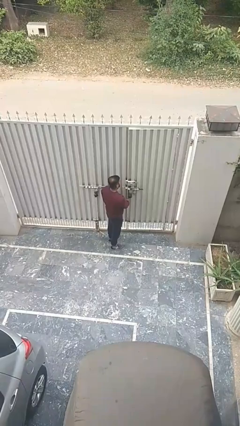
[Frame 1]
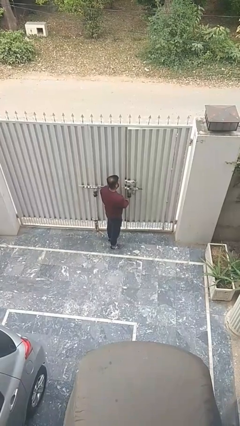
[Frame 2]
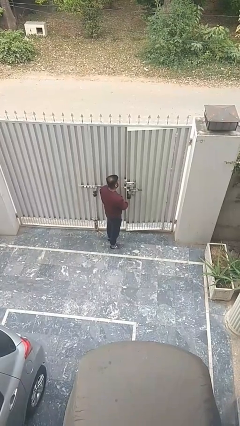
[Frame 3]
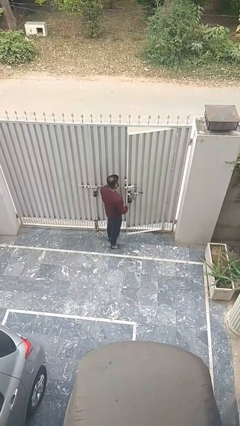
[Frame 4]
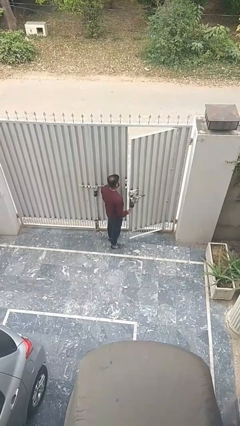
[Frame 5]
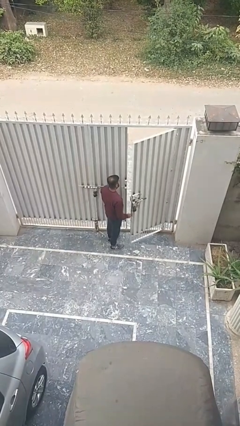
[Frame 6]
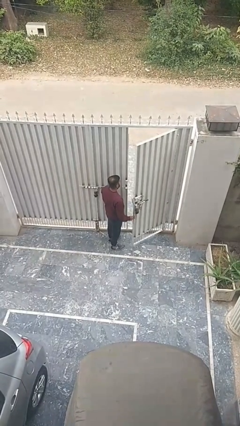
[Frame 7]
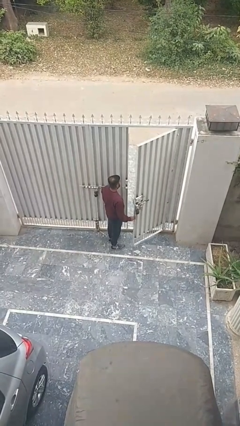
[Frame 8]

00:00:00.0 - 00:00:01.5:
person opens facility door

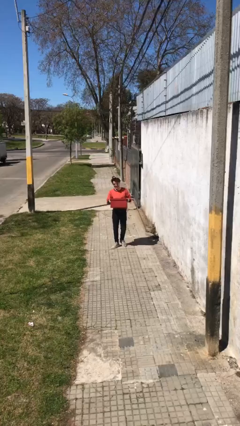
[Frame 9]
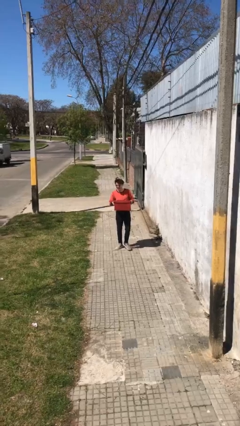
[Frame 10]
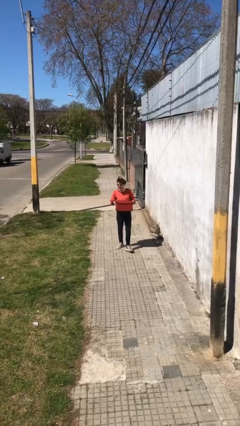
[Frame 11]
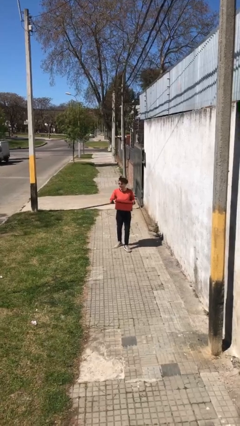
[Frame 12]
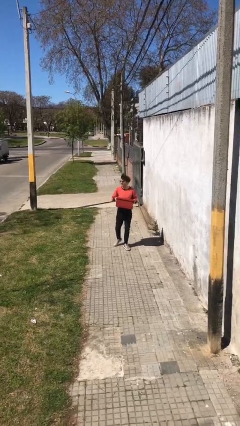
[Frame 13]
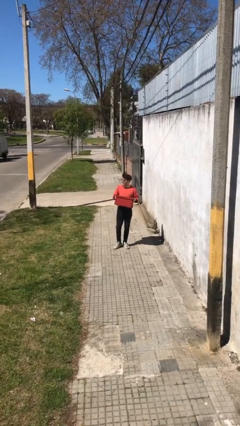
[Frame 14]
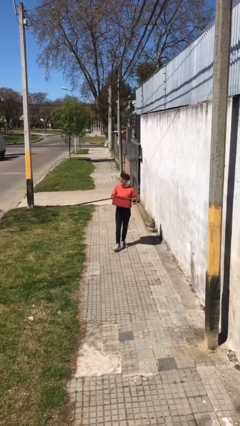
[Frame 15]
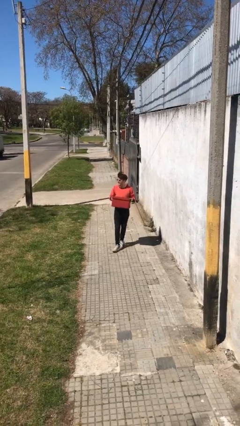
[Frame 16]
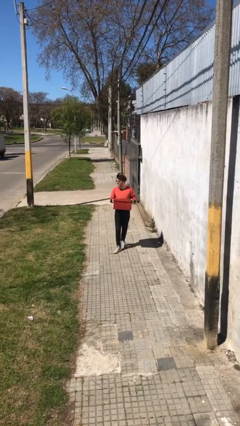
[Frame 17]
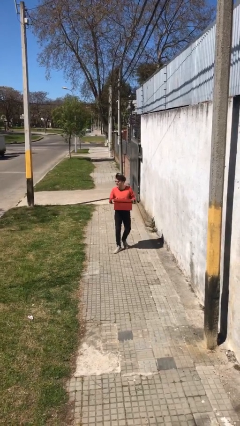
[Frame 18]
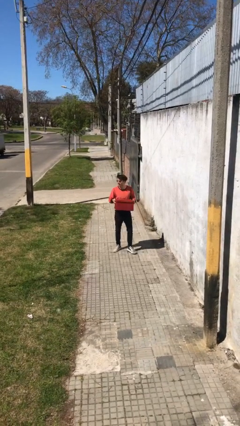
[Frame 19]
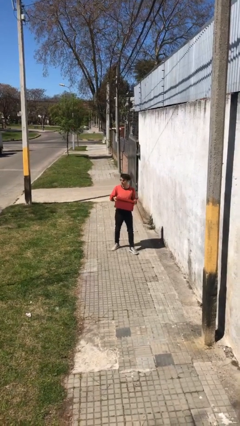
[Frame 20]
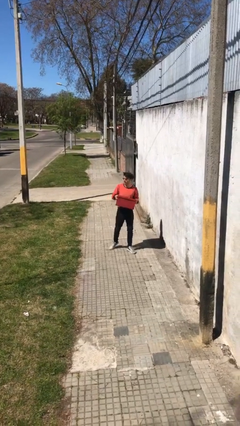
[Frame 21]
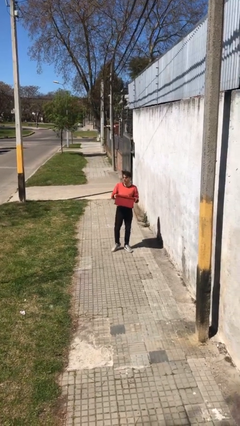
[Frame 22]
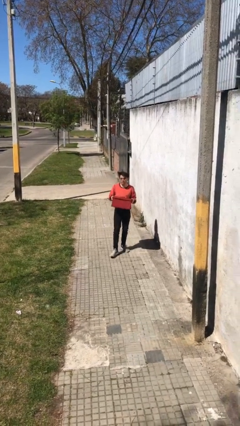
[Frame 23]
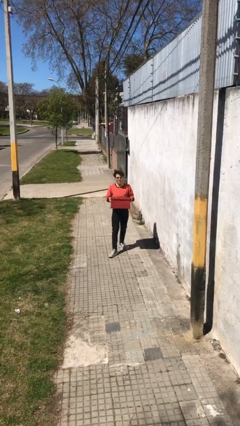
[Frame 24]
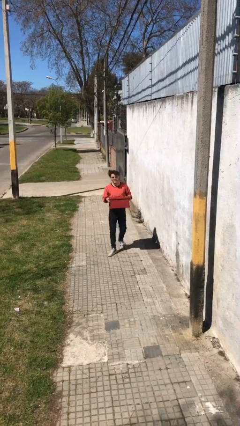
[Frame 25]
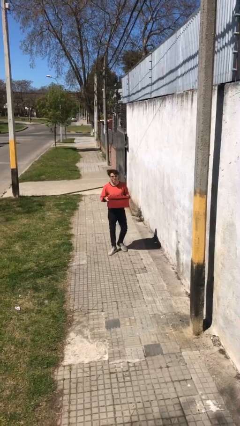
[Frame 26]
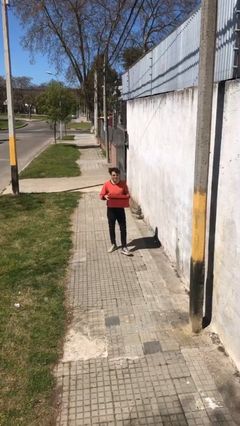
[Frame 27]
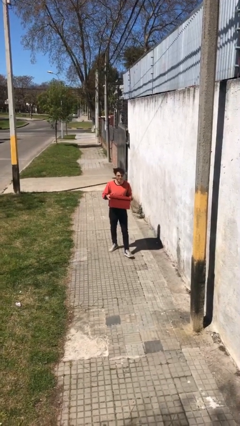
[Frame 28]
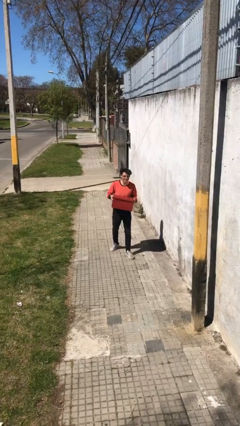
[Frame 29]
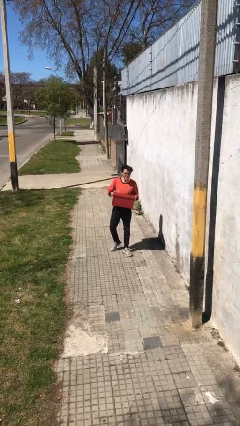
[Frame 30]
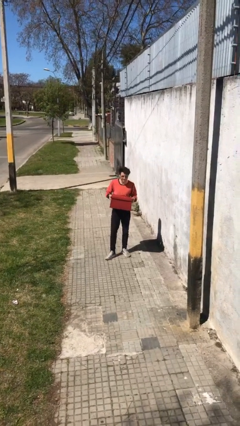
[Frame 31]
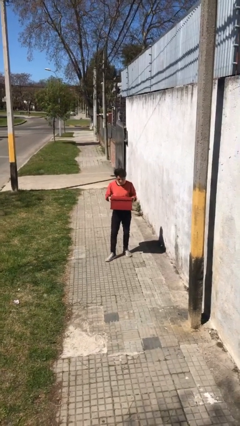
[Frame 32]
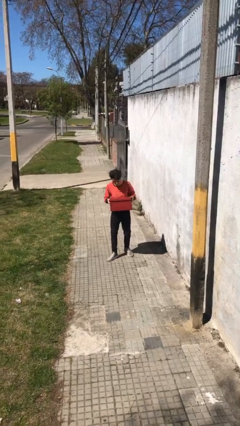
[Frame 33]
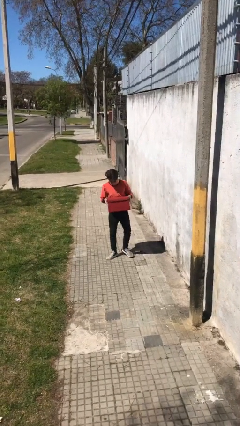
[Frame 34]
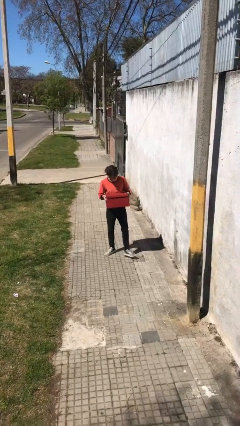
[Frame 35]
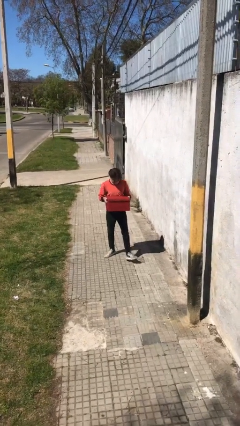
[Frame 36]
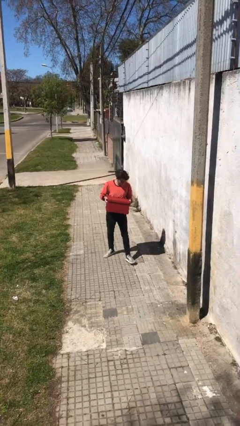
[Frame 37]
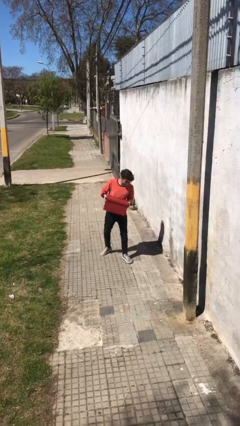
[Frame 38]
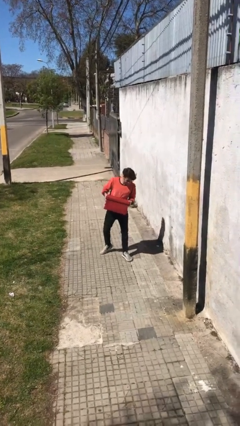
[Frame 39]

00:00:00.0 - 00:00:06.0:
person carries heavy object

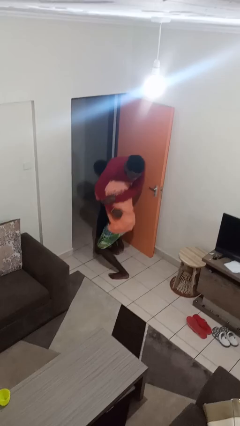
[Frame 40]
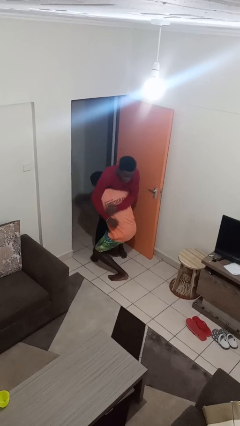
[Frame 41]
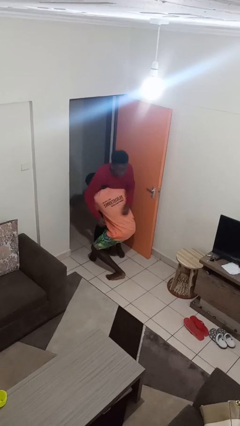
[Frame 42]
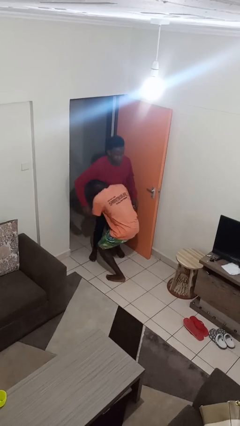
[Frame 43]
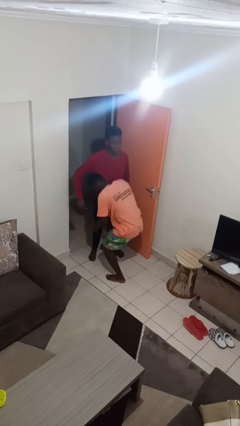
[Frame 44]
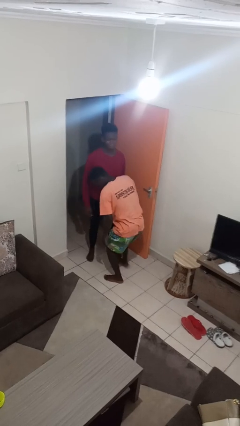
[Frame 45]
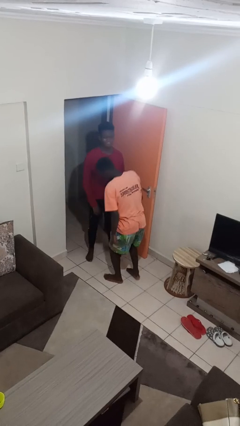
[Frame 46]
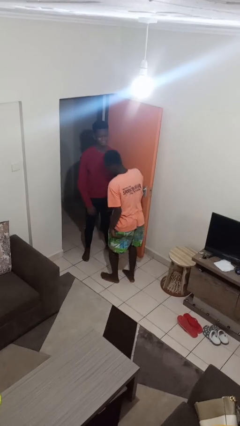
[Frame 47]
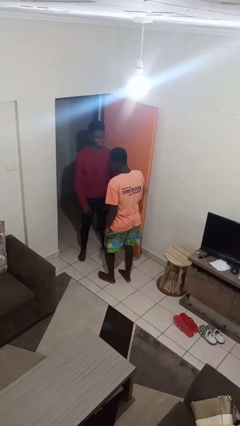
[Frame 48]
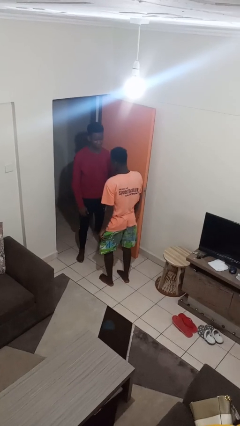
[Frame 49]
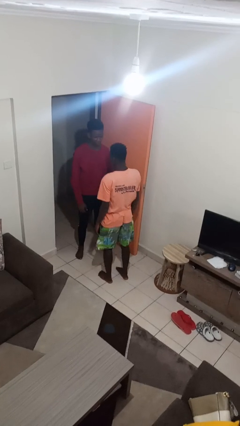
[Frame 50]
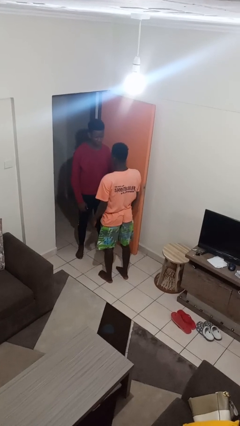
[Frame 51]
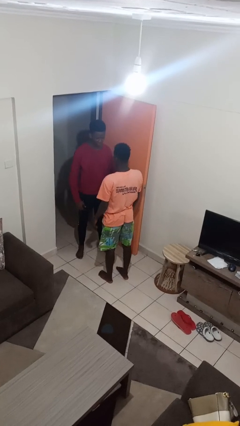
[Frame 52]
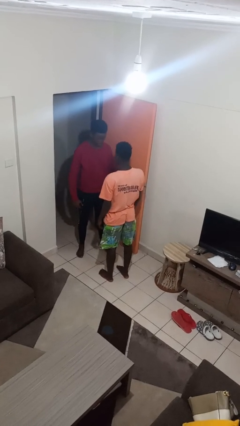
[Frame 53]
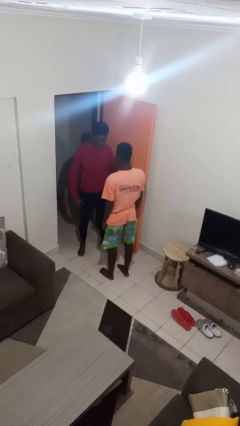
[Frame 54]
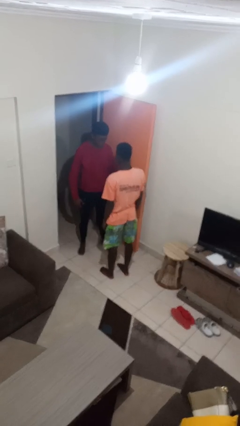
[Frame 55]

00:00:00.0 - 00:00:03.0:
person puts down person

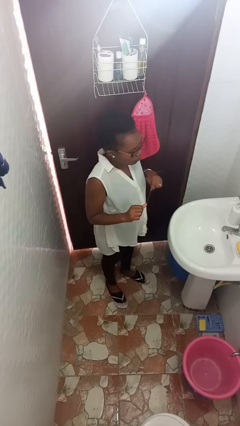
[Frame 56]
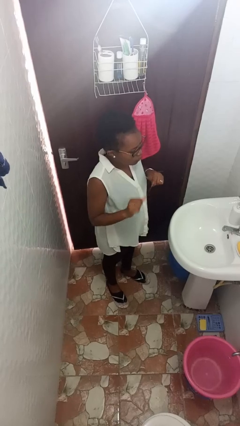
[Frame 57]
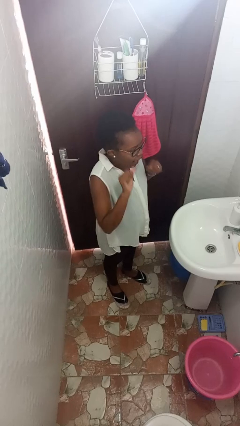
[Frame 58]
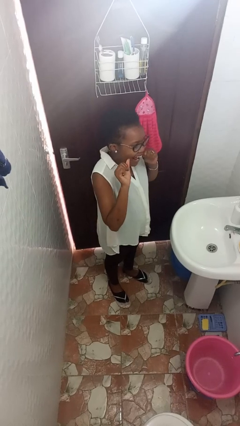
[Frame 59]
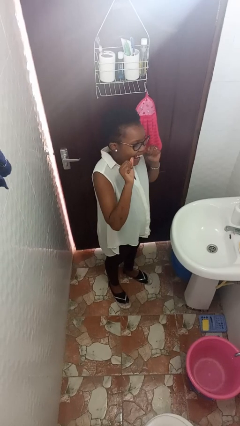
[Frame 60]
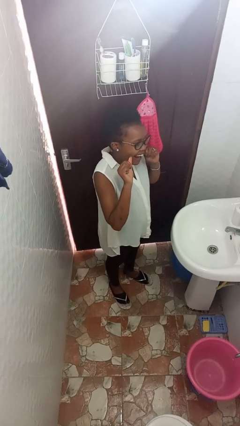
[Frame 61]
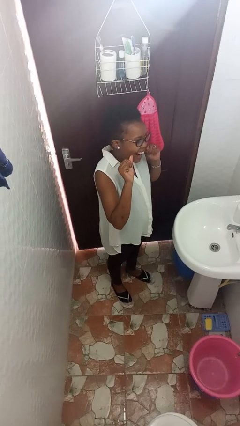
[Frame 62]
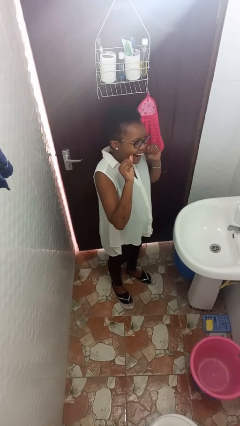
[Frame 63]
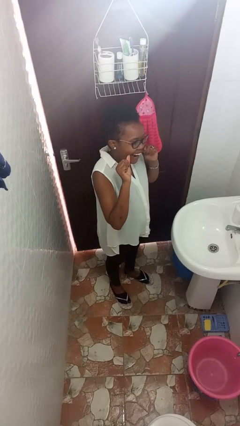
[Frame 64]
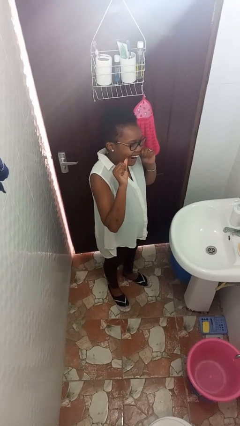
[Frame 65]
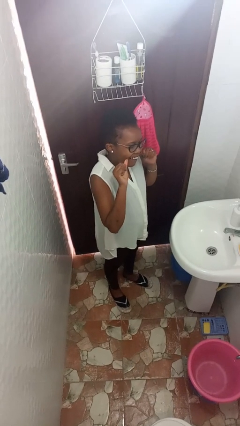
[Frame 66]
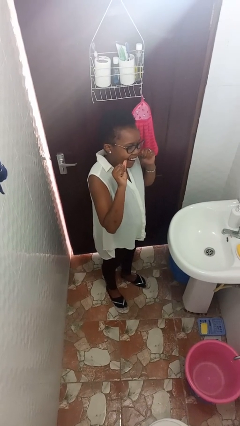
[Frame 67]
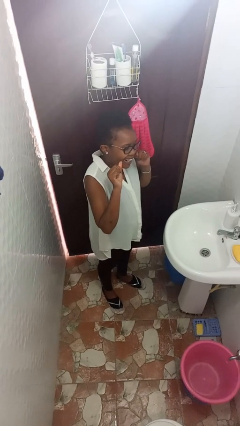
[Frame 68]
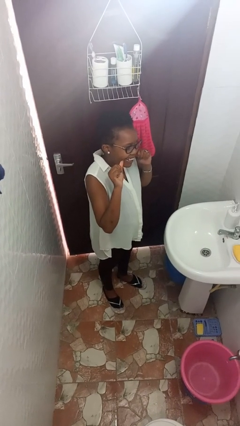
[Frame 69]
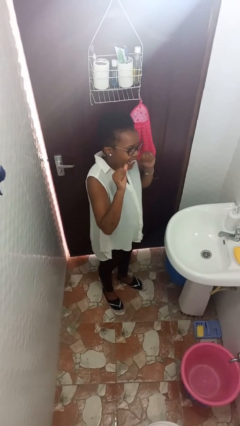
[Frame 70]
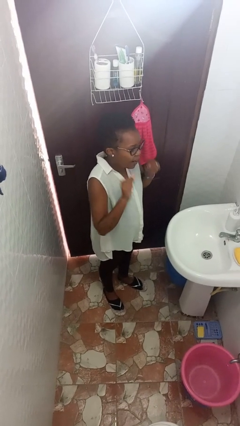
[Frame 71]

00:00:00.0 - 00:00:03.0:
person flosses

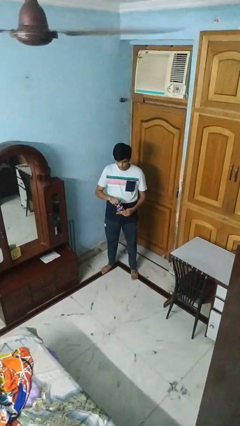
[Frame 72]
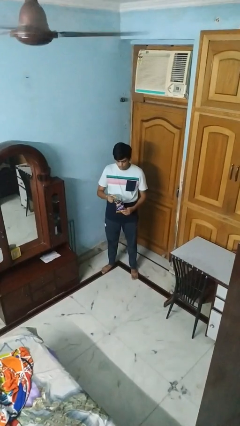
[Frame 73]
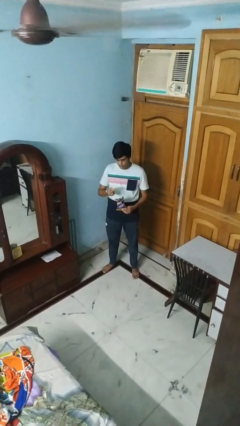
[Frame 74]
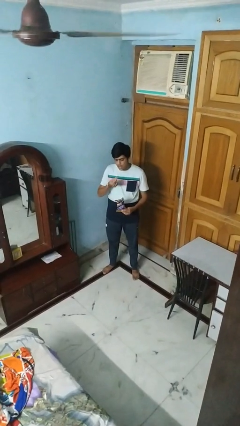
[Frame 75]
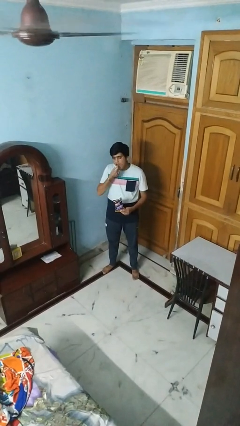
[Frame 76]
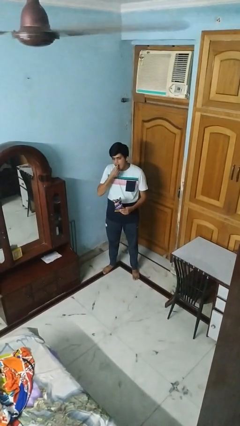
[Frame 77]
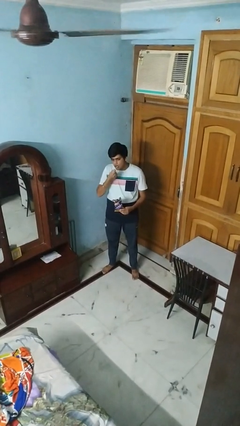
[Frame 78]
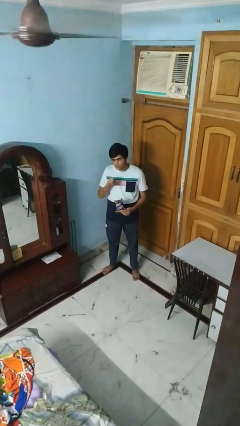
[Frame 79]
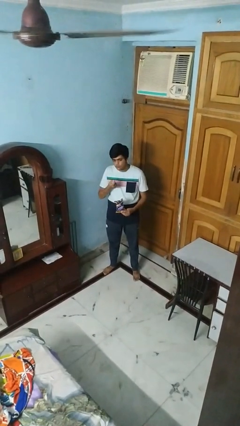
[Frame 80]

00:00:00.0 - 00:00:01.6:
person eats snack from bag

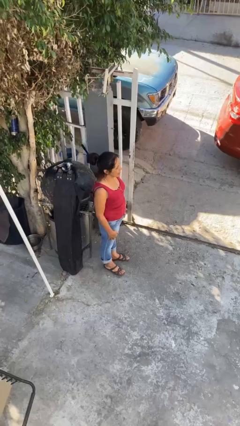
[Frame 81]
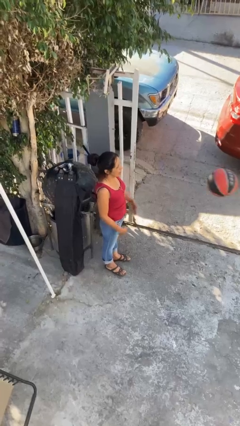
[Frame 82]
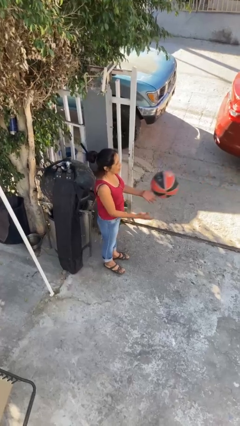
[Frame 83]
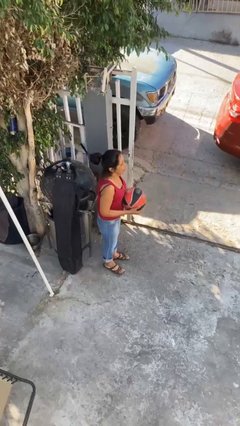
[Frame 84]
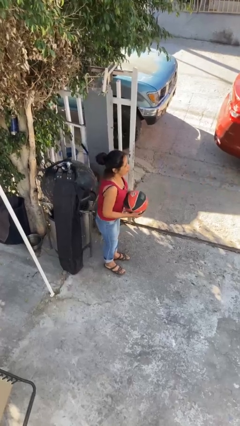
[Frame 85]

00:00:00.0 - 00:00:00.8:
person catches object from person

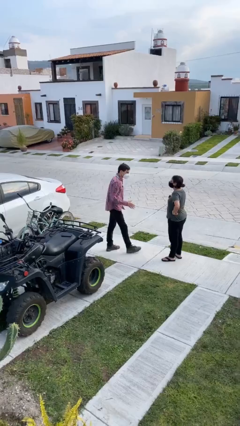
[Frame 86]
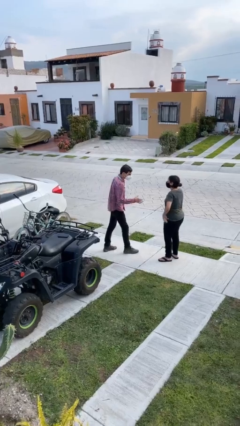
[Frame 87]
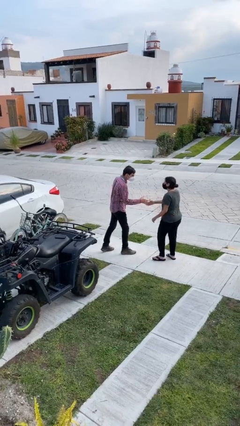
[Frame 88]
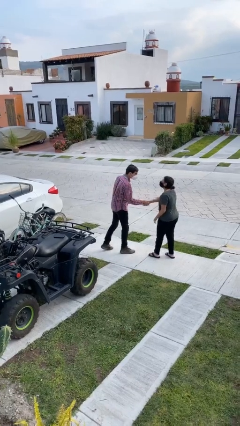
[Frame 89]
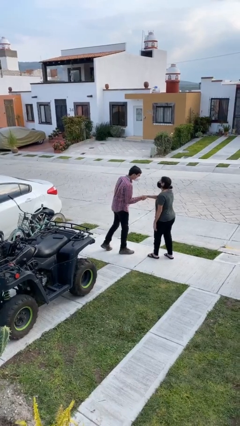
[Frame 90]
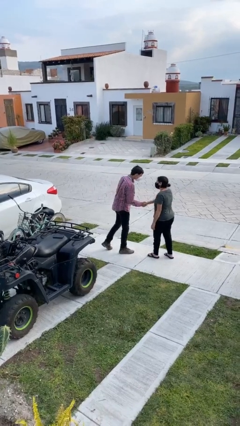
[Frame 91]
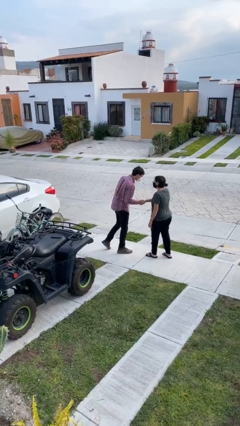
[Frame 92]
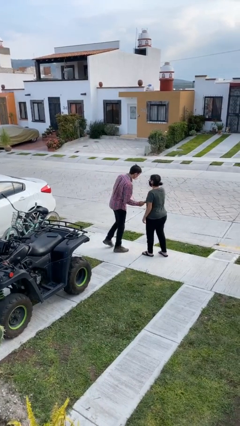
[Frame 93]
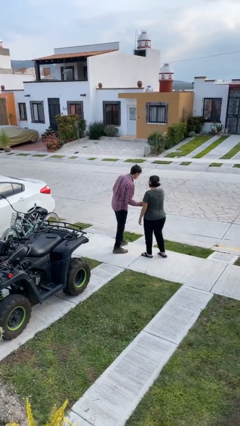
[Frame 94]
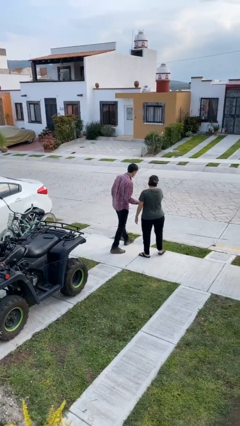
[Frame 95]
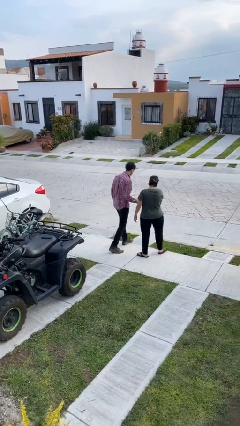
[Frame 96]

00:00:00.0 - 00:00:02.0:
person shakes hand
